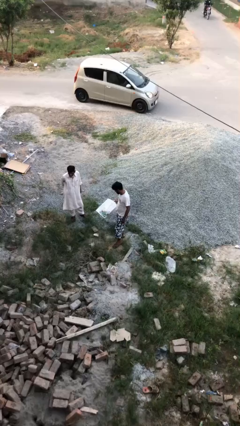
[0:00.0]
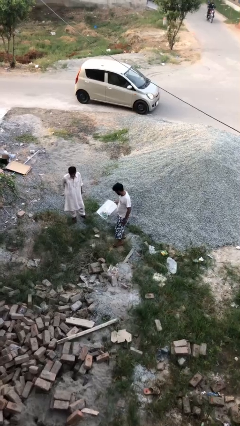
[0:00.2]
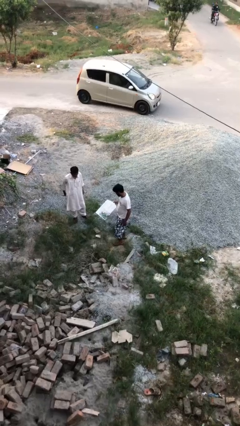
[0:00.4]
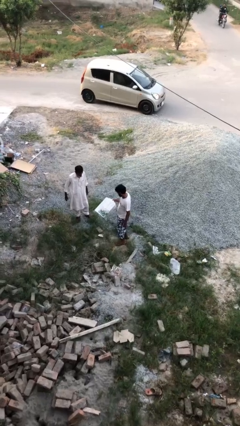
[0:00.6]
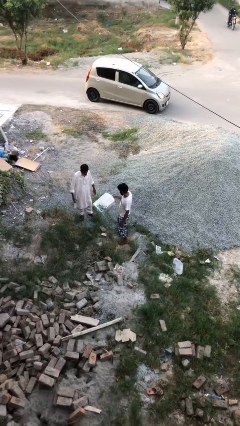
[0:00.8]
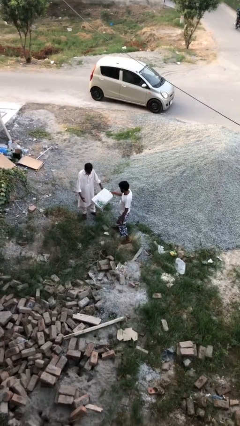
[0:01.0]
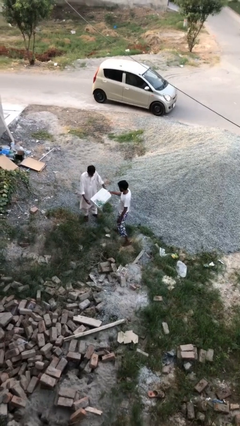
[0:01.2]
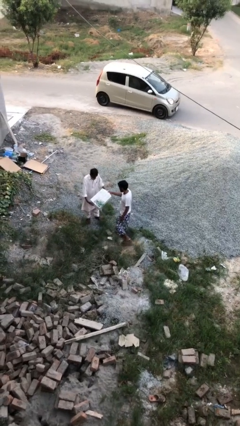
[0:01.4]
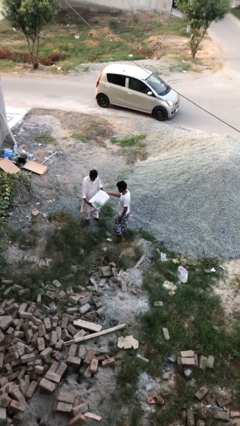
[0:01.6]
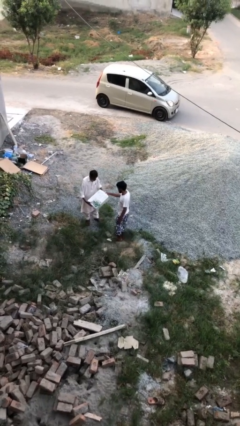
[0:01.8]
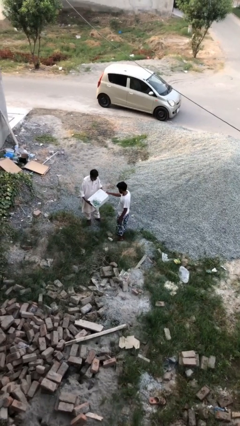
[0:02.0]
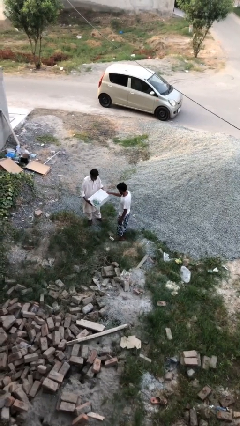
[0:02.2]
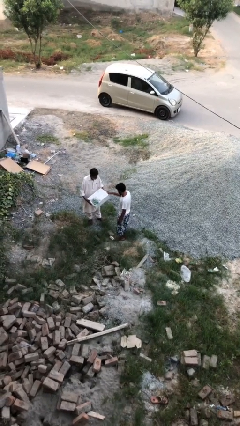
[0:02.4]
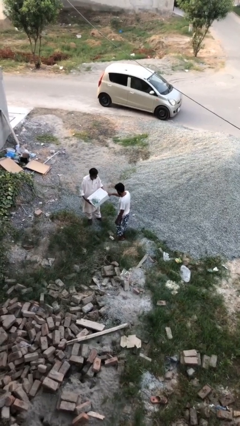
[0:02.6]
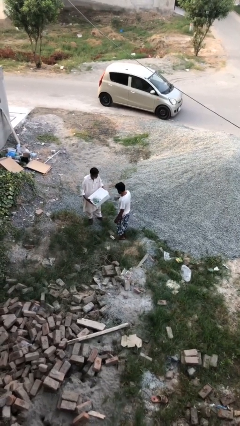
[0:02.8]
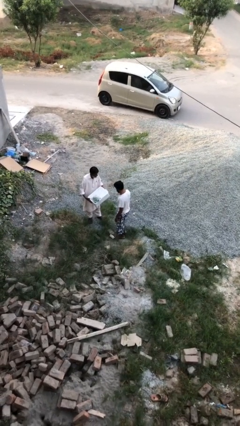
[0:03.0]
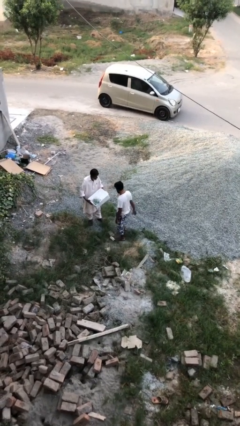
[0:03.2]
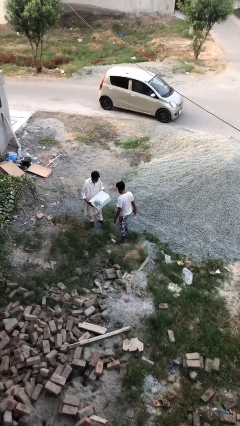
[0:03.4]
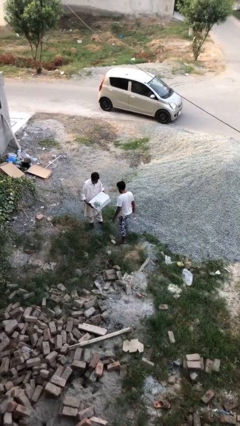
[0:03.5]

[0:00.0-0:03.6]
person transfers object to person

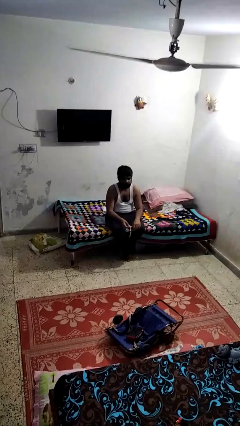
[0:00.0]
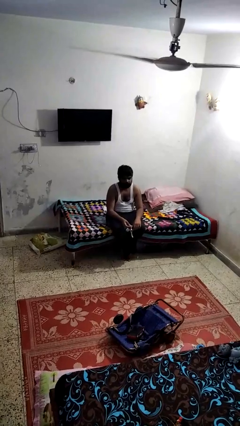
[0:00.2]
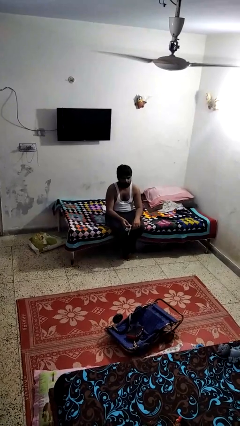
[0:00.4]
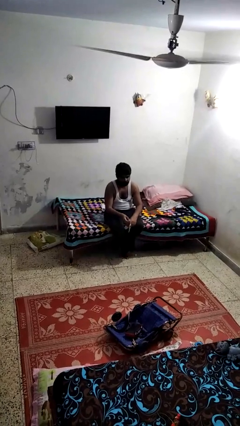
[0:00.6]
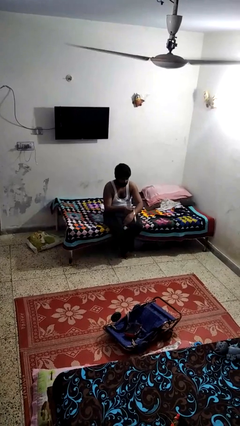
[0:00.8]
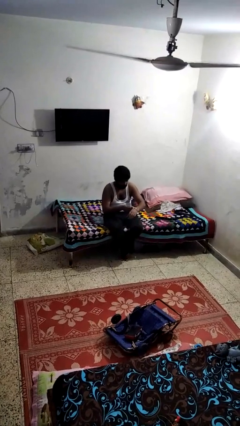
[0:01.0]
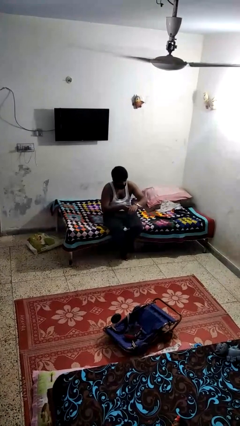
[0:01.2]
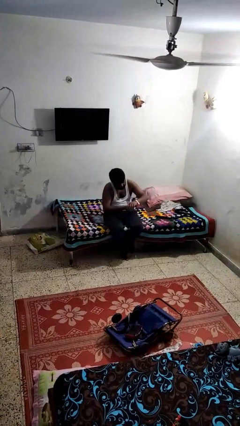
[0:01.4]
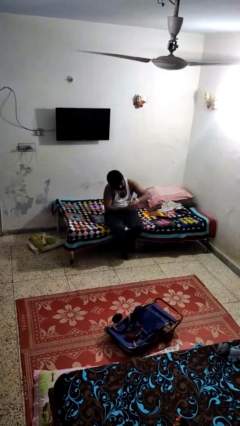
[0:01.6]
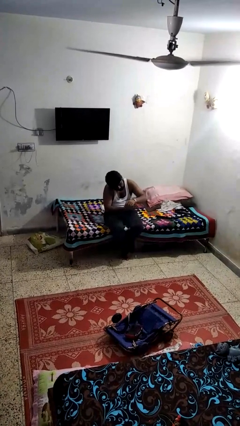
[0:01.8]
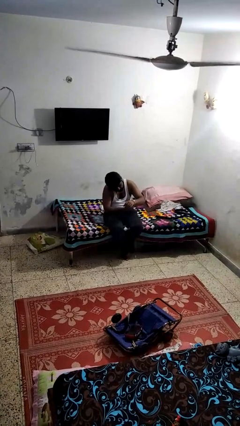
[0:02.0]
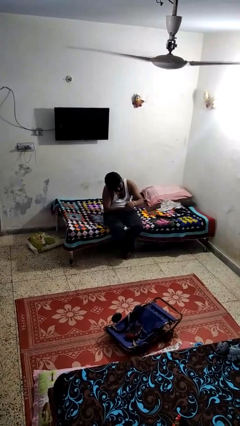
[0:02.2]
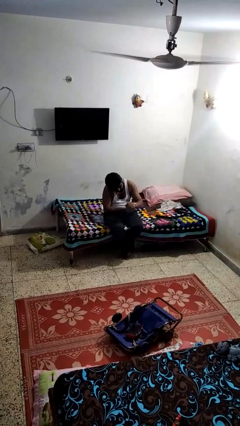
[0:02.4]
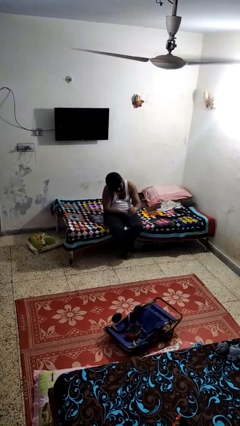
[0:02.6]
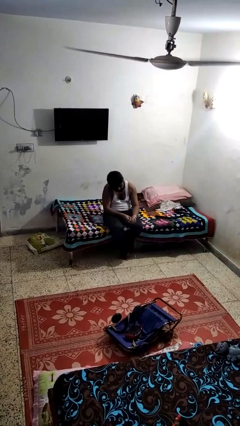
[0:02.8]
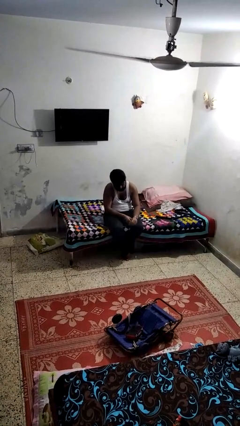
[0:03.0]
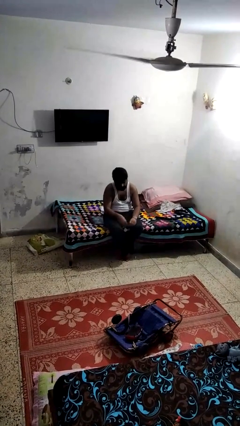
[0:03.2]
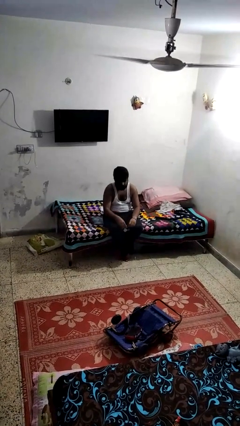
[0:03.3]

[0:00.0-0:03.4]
person puts on wristwatch

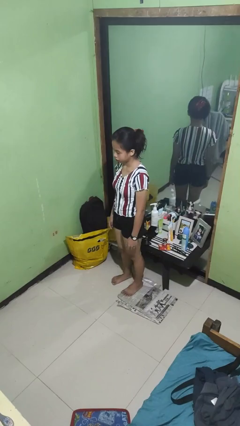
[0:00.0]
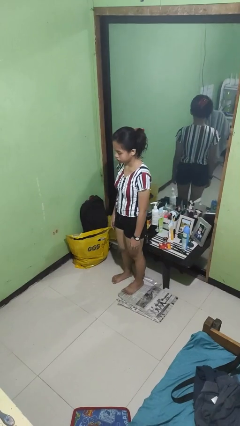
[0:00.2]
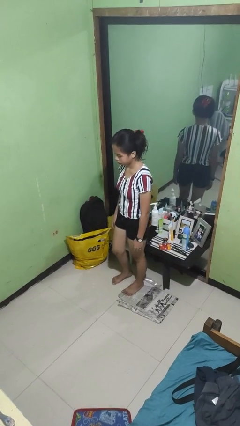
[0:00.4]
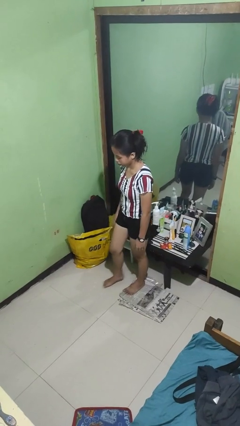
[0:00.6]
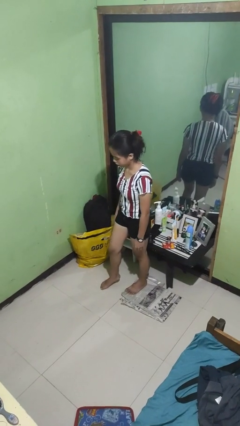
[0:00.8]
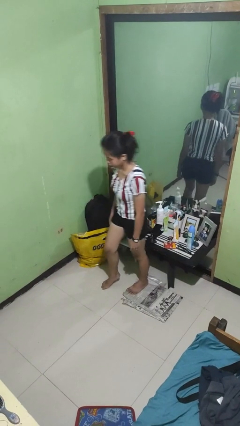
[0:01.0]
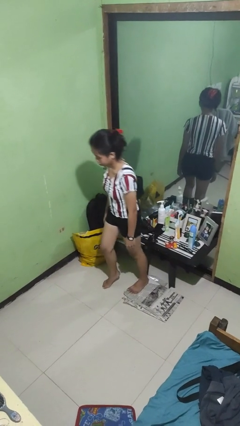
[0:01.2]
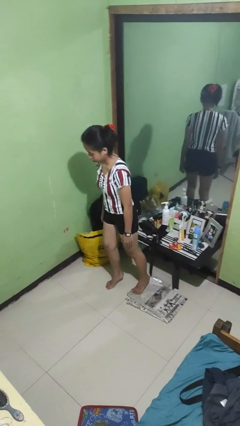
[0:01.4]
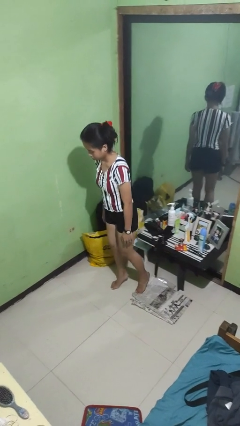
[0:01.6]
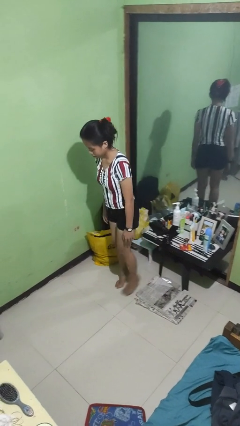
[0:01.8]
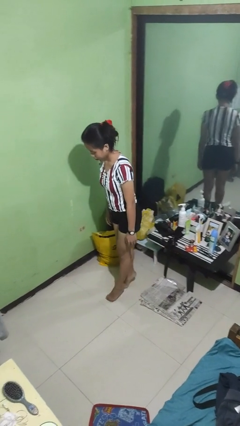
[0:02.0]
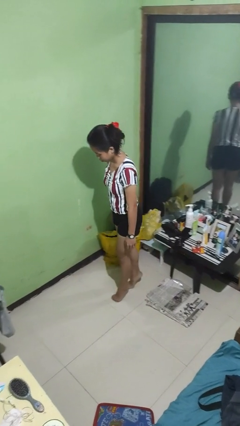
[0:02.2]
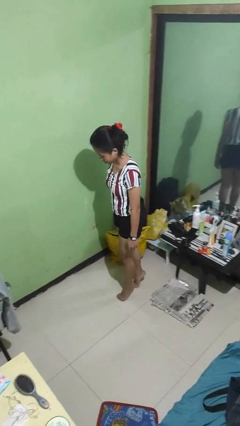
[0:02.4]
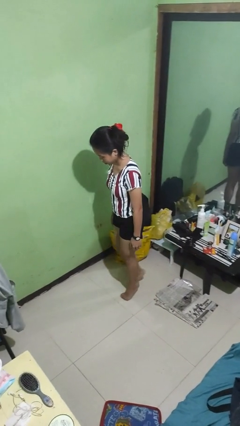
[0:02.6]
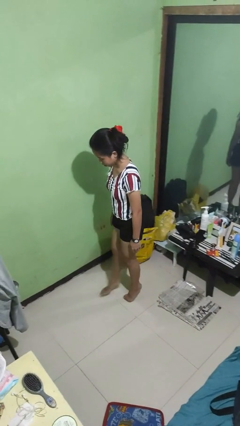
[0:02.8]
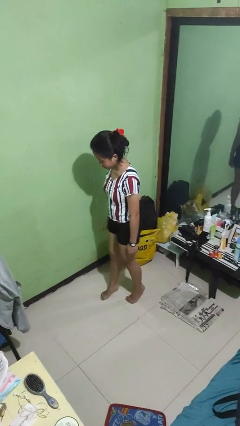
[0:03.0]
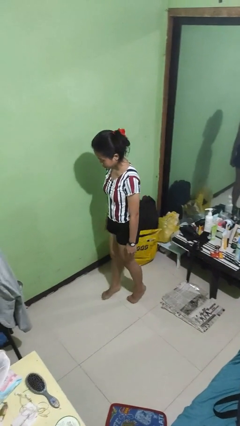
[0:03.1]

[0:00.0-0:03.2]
person walks tiptoe

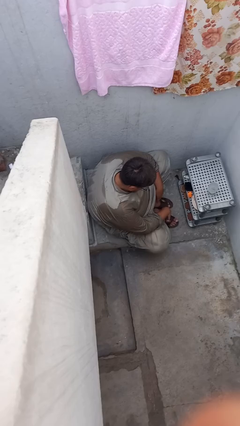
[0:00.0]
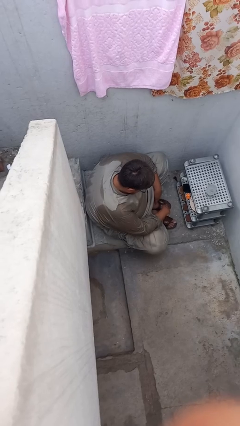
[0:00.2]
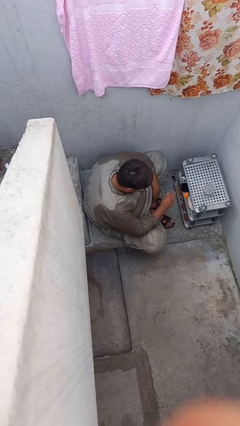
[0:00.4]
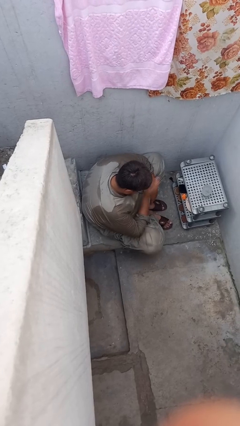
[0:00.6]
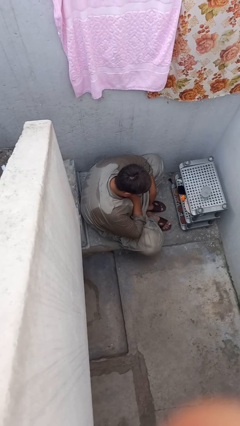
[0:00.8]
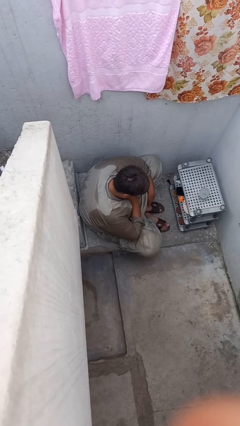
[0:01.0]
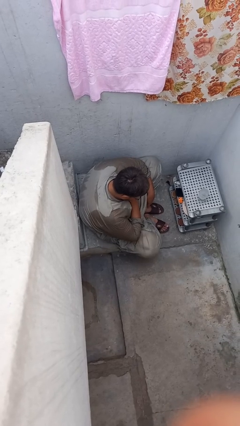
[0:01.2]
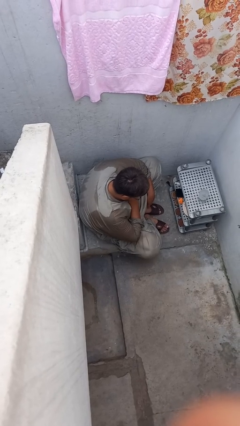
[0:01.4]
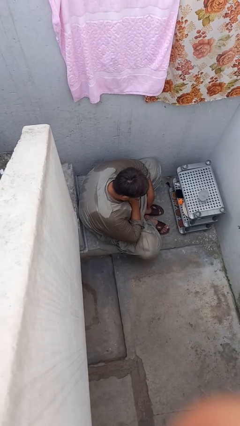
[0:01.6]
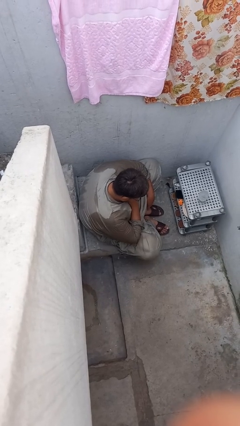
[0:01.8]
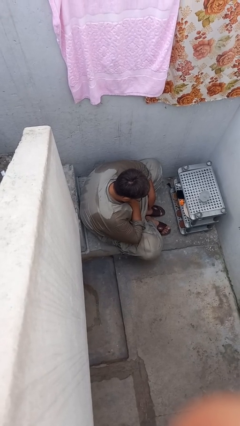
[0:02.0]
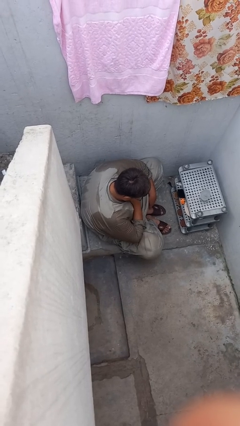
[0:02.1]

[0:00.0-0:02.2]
person drums on chest

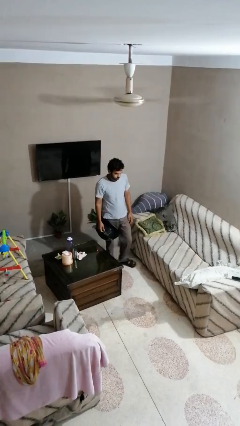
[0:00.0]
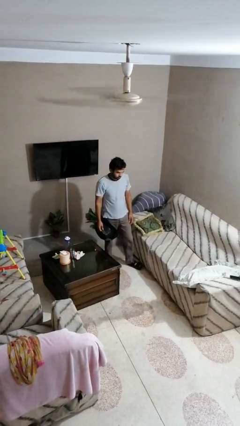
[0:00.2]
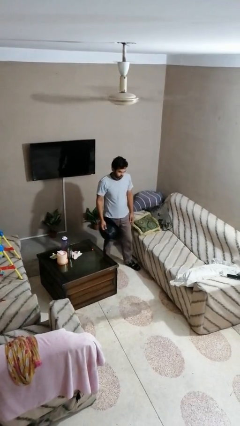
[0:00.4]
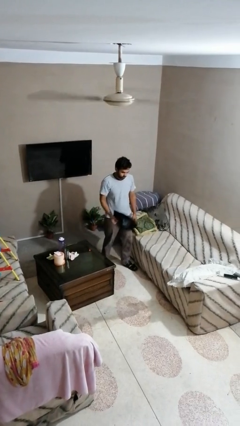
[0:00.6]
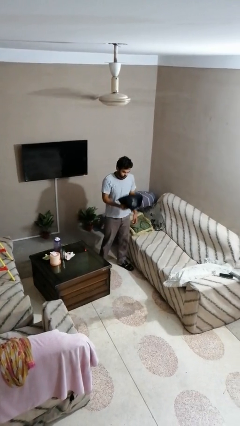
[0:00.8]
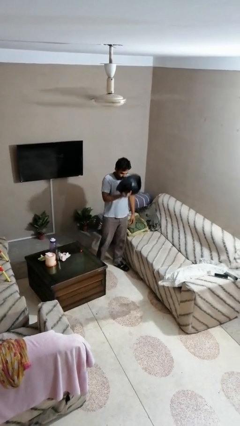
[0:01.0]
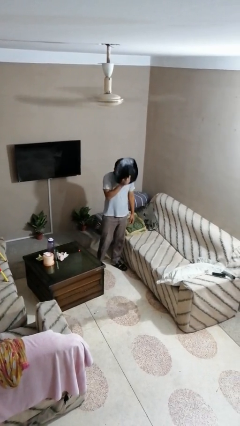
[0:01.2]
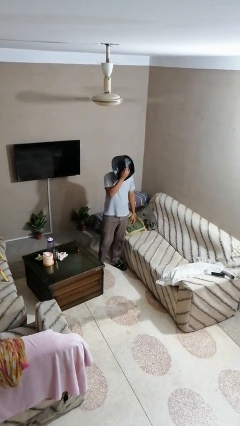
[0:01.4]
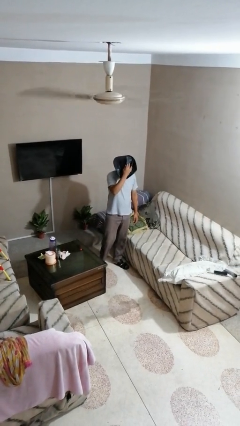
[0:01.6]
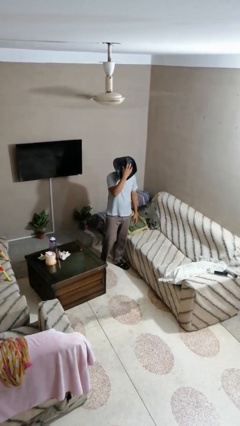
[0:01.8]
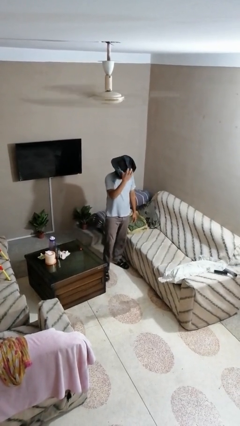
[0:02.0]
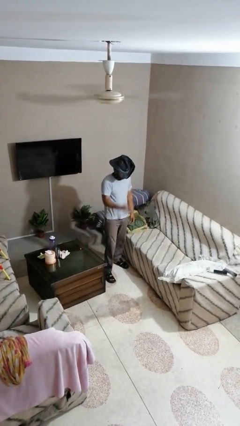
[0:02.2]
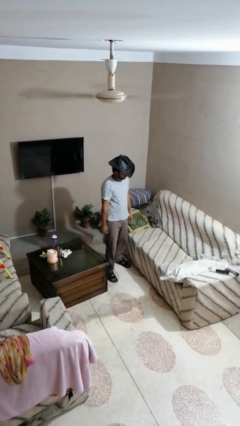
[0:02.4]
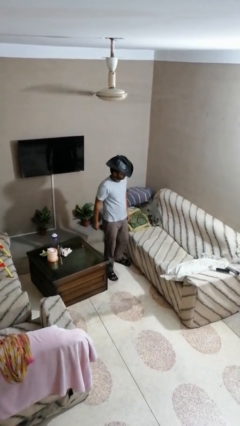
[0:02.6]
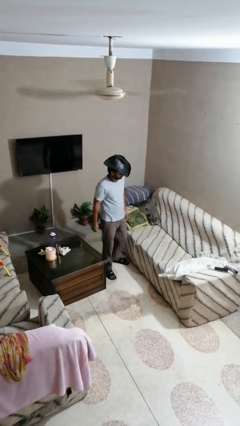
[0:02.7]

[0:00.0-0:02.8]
person puts on hat

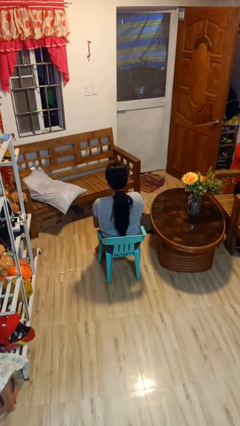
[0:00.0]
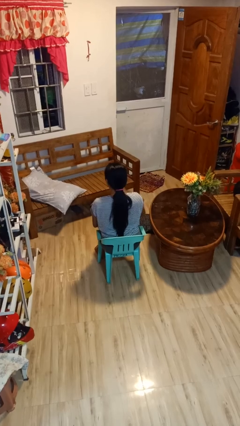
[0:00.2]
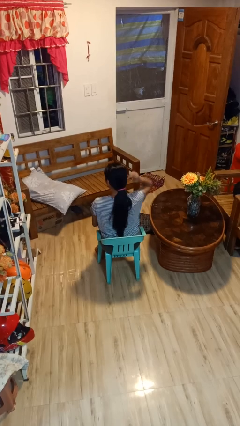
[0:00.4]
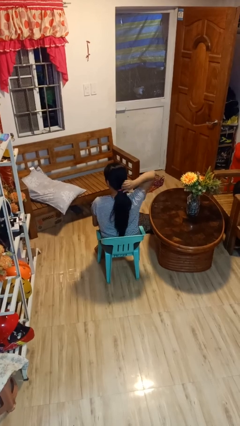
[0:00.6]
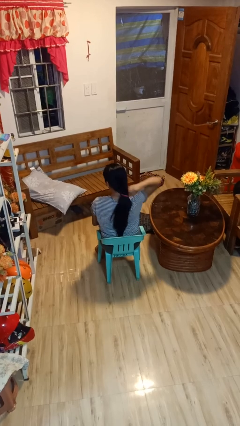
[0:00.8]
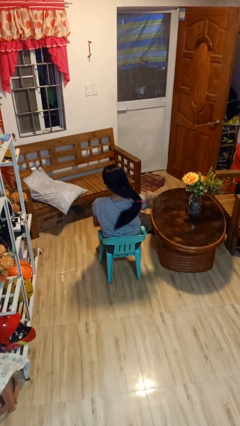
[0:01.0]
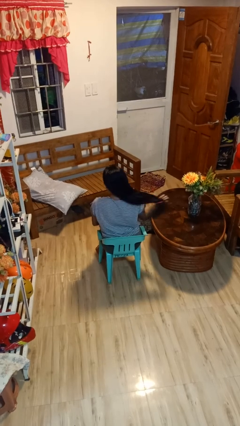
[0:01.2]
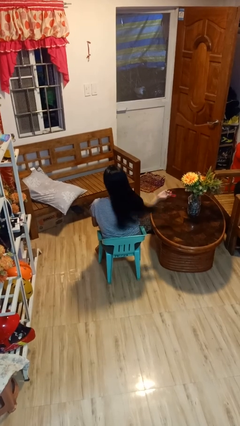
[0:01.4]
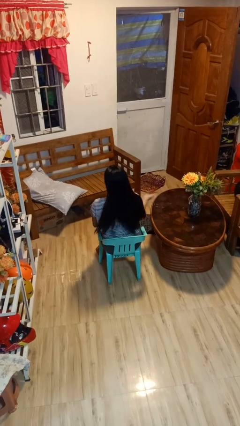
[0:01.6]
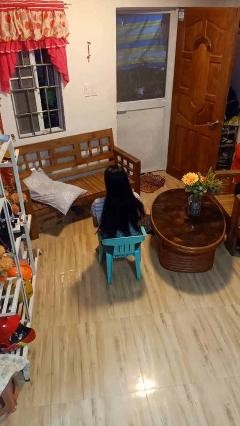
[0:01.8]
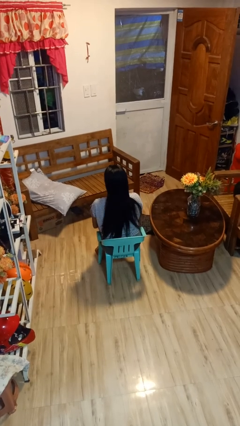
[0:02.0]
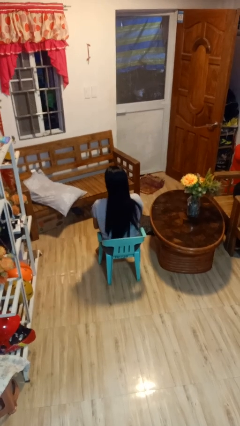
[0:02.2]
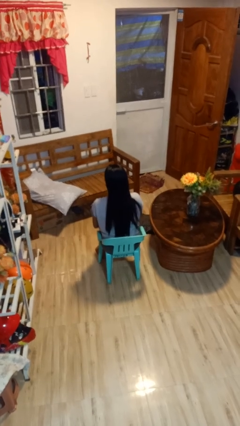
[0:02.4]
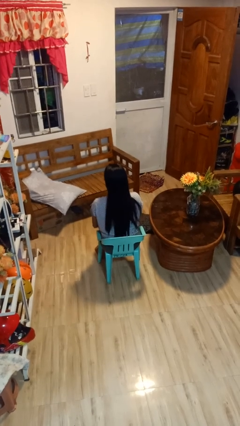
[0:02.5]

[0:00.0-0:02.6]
person takes off hairtie
